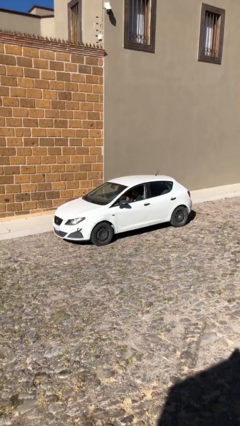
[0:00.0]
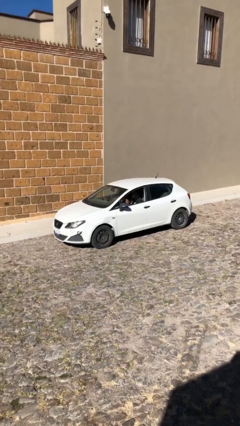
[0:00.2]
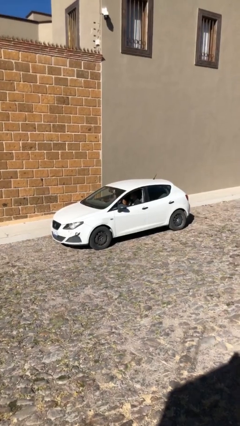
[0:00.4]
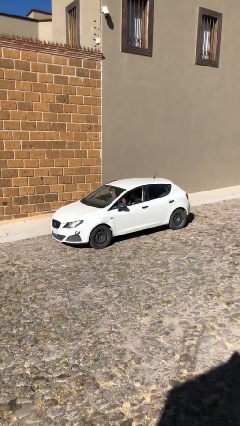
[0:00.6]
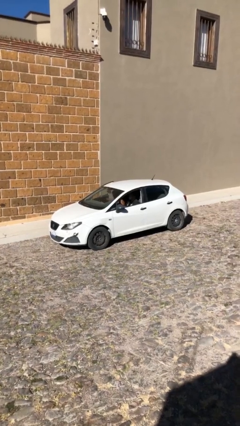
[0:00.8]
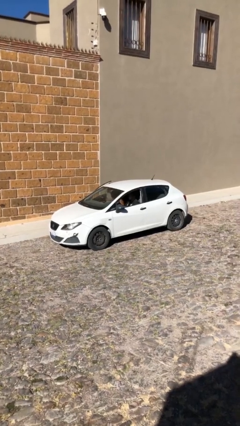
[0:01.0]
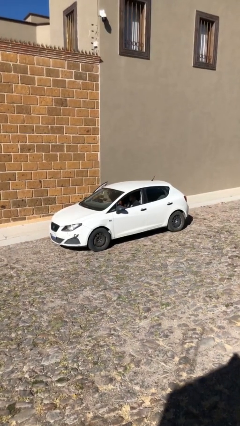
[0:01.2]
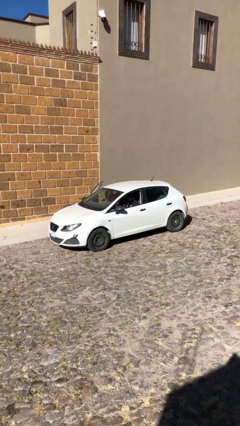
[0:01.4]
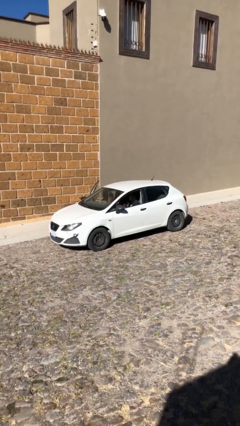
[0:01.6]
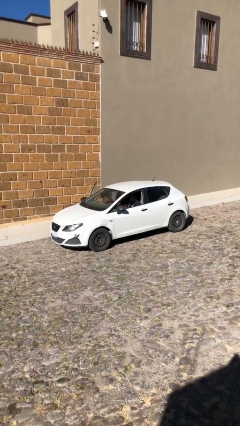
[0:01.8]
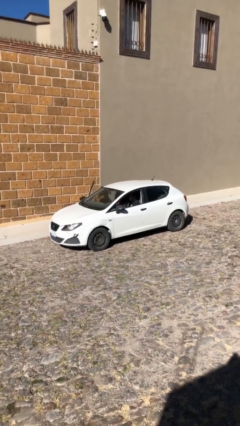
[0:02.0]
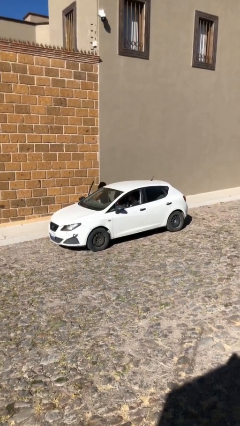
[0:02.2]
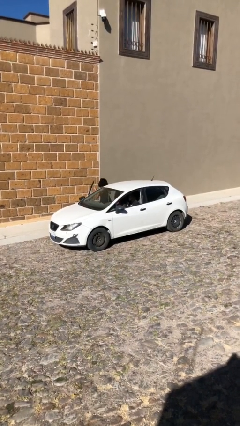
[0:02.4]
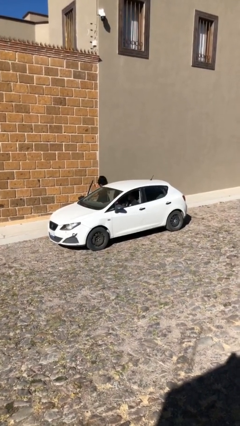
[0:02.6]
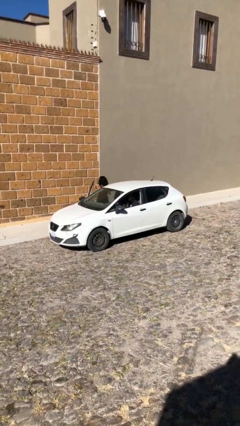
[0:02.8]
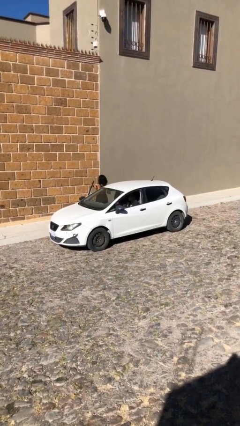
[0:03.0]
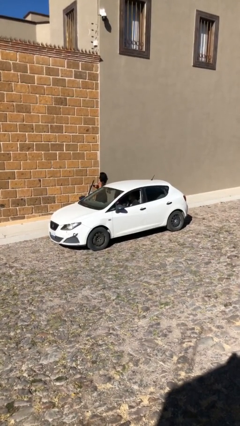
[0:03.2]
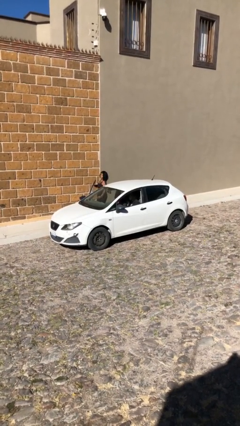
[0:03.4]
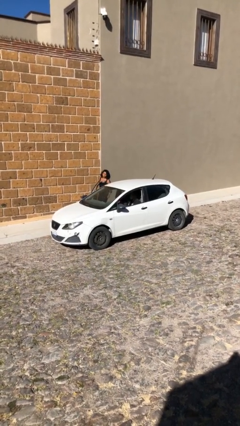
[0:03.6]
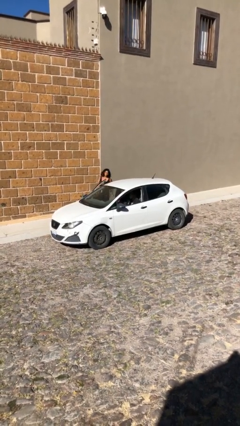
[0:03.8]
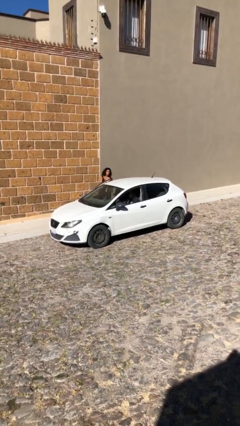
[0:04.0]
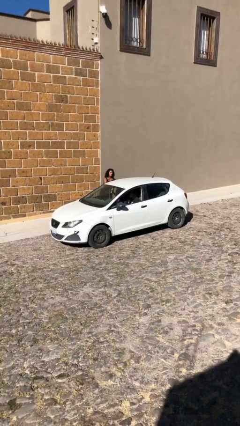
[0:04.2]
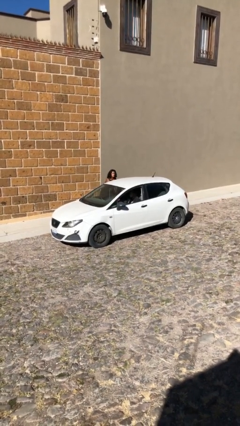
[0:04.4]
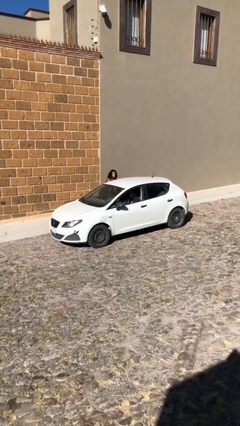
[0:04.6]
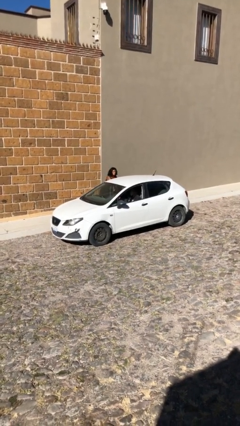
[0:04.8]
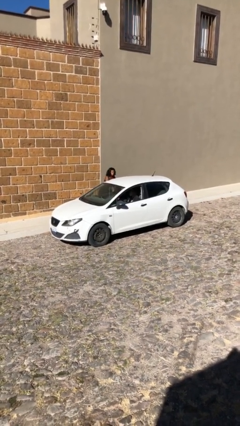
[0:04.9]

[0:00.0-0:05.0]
car drops off person

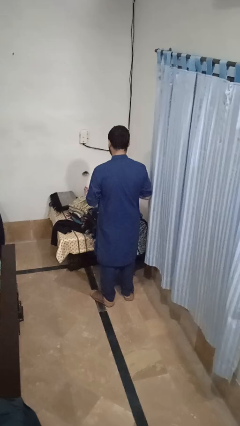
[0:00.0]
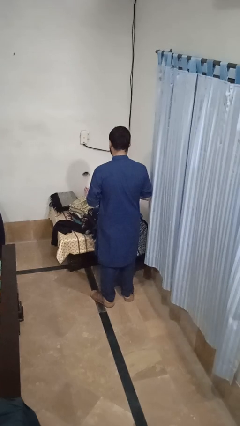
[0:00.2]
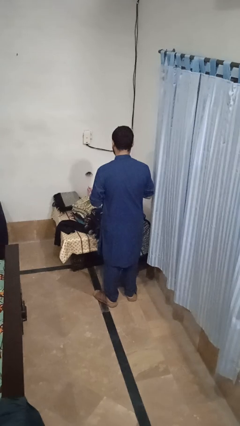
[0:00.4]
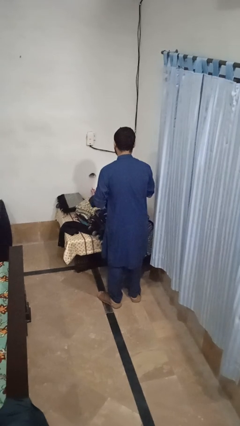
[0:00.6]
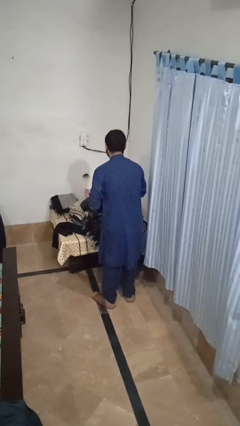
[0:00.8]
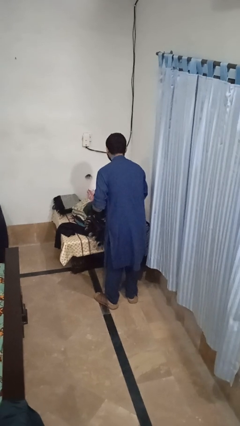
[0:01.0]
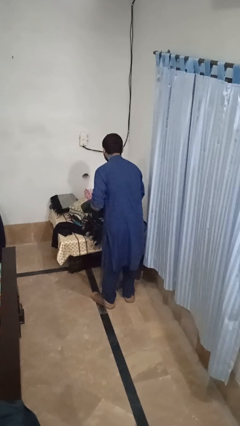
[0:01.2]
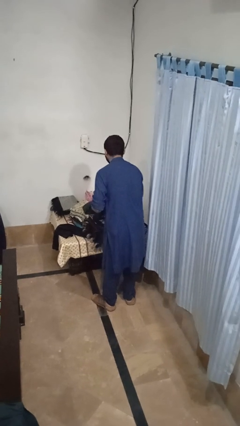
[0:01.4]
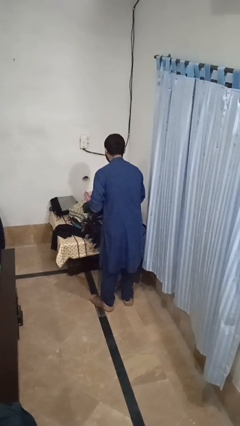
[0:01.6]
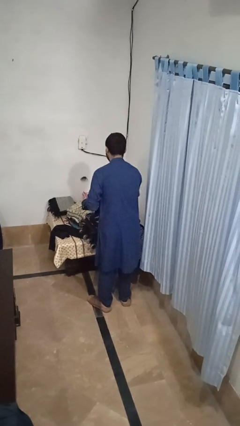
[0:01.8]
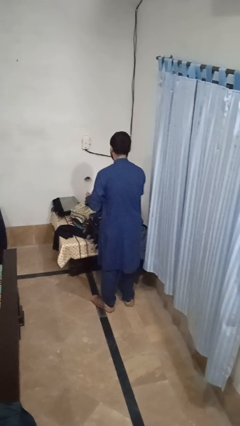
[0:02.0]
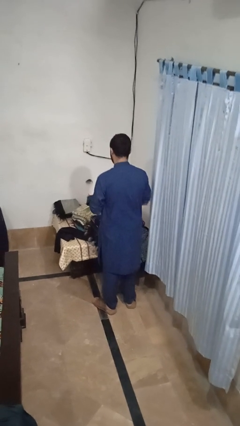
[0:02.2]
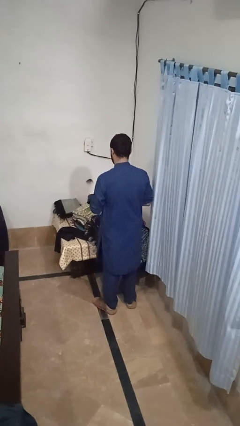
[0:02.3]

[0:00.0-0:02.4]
person loads clothes into suitcase

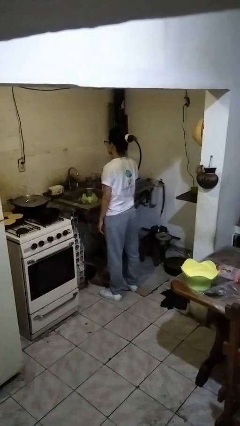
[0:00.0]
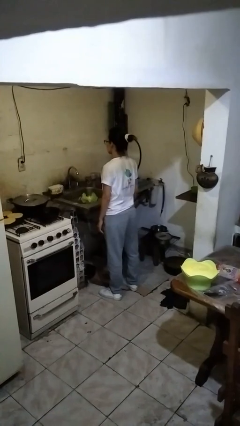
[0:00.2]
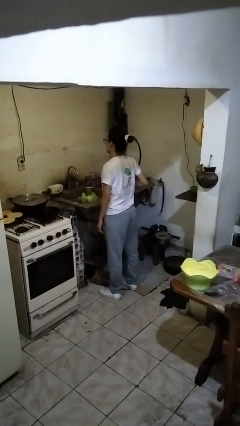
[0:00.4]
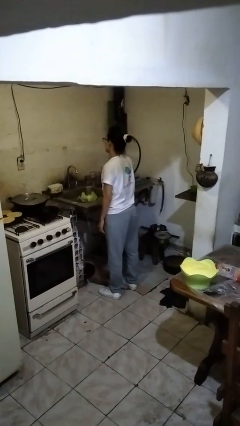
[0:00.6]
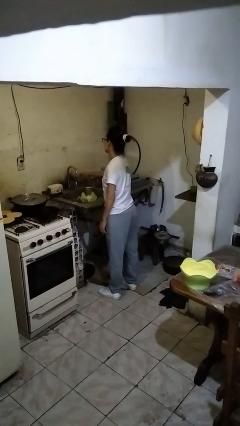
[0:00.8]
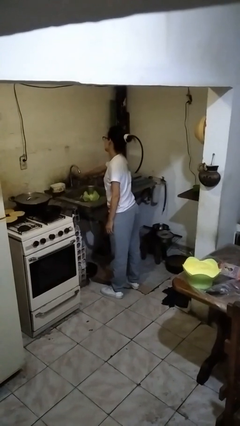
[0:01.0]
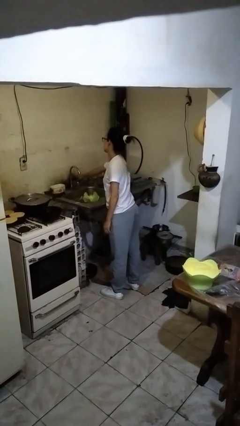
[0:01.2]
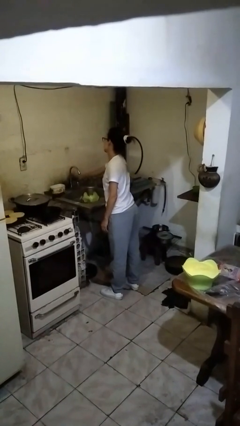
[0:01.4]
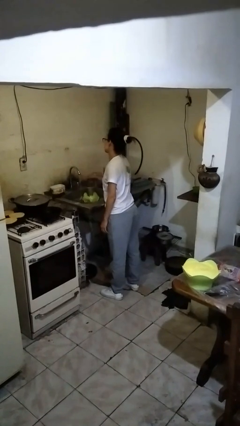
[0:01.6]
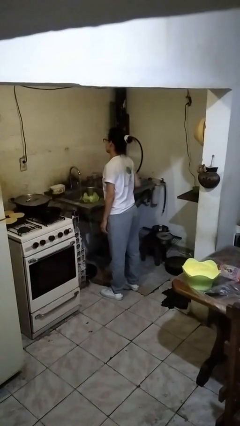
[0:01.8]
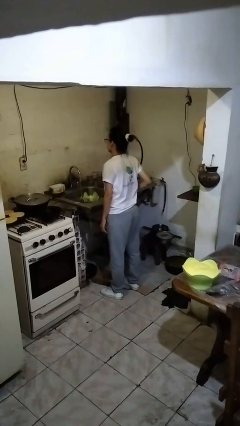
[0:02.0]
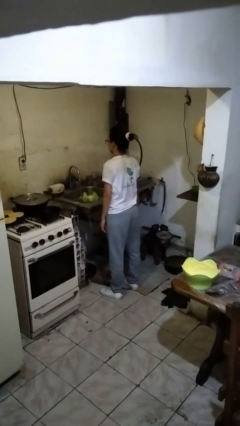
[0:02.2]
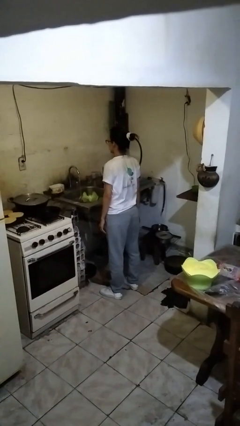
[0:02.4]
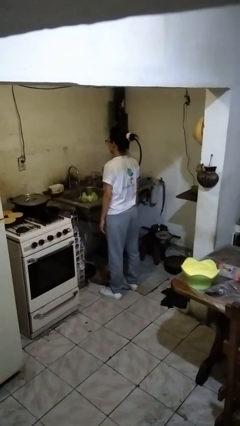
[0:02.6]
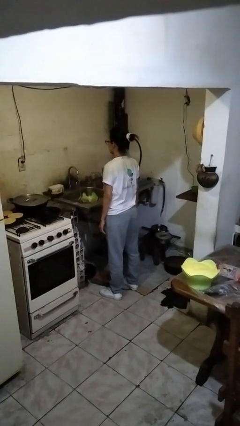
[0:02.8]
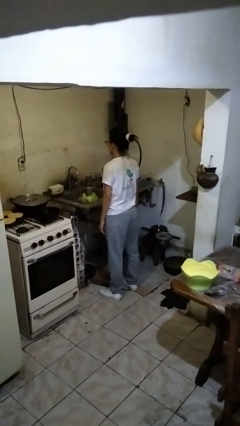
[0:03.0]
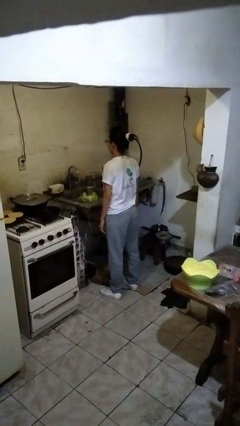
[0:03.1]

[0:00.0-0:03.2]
person turns on faucet

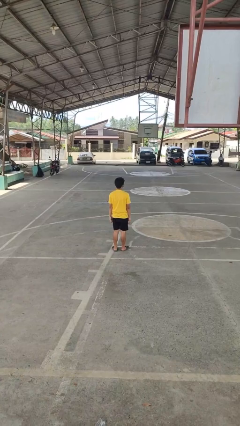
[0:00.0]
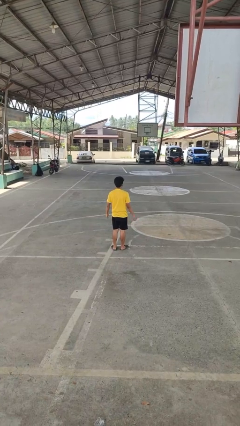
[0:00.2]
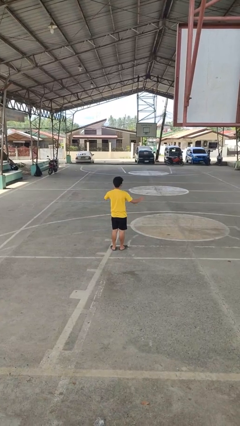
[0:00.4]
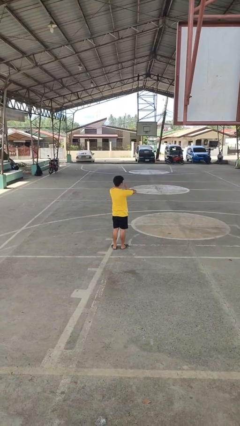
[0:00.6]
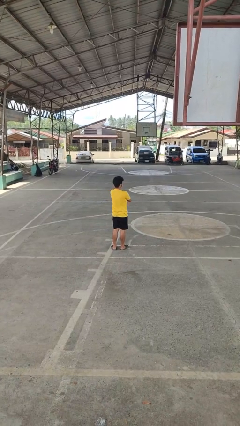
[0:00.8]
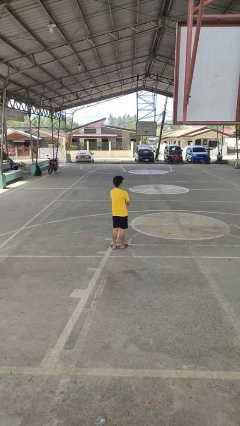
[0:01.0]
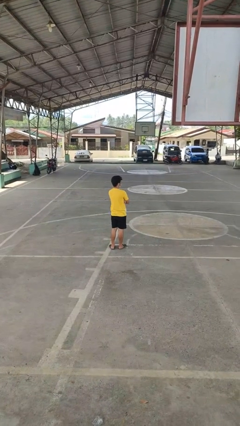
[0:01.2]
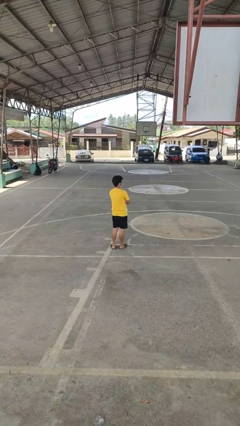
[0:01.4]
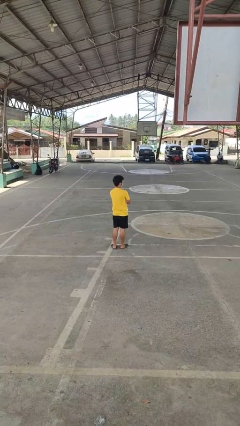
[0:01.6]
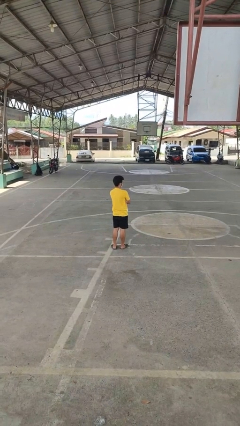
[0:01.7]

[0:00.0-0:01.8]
person crosses arms

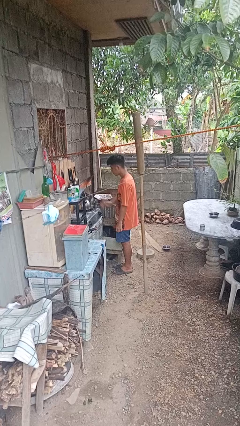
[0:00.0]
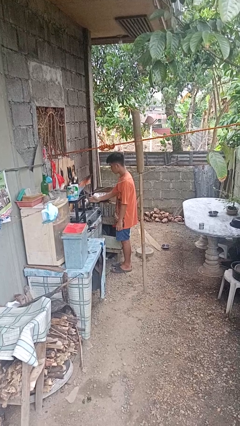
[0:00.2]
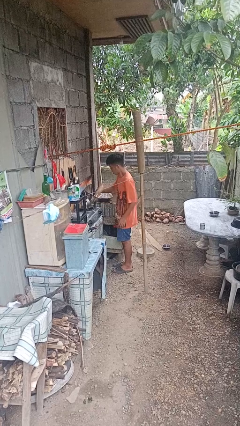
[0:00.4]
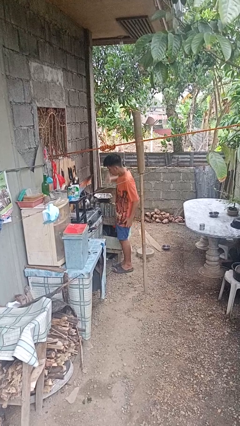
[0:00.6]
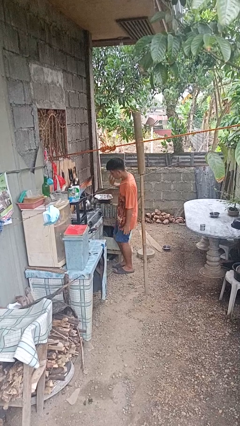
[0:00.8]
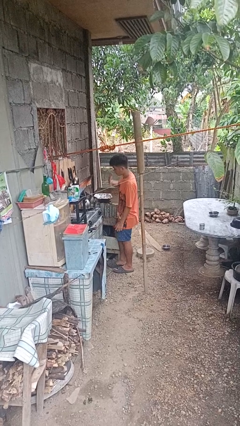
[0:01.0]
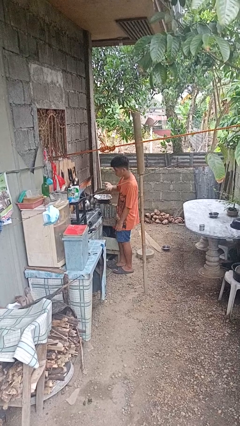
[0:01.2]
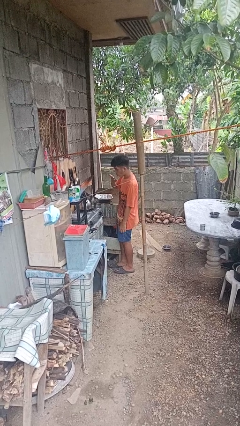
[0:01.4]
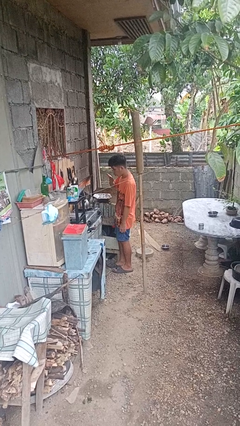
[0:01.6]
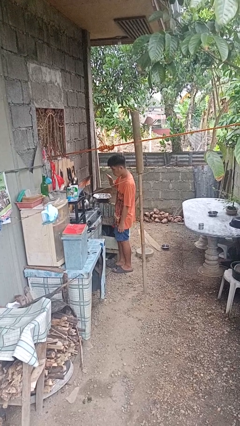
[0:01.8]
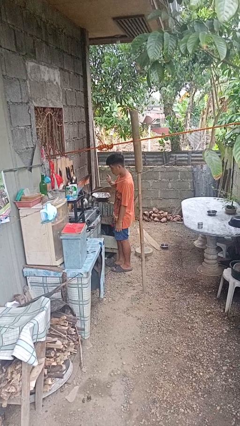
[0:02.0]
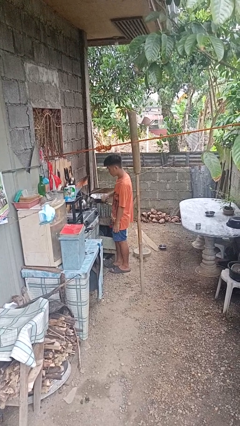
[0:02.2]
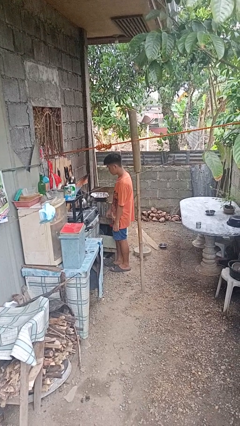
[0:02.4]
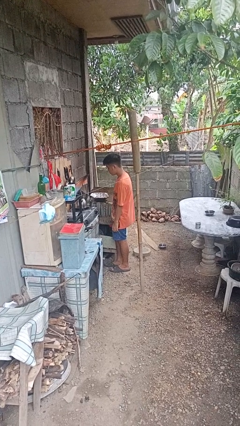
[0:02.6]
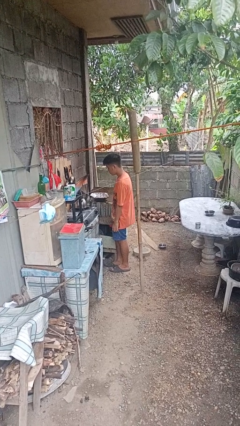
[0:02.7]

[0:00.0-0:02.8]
person burns hand

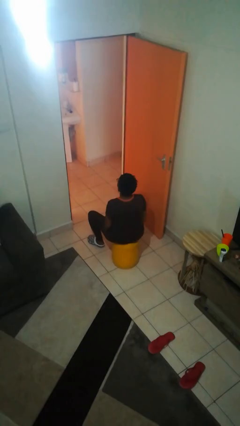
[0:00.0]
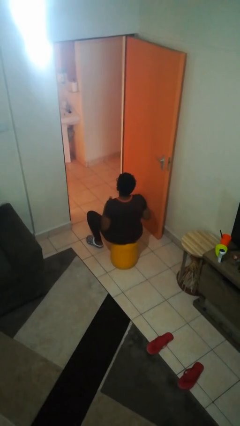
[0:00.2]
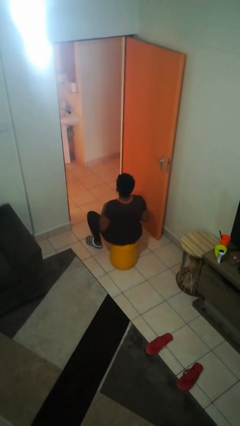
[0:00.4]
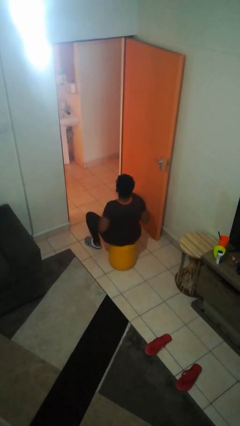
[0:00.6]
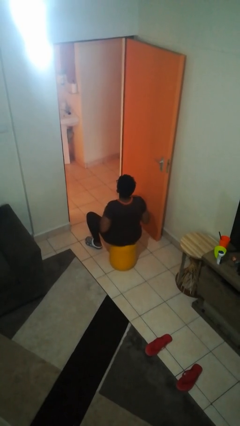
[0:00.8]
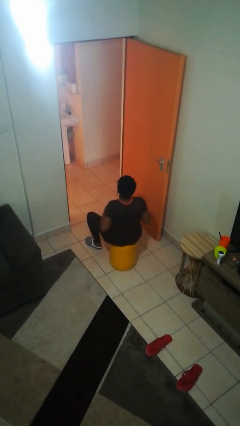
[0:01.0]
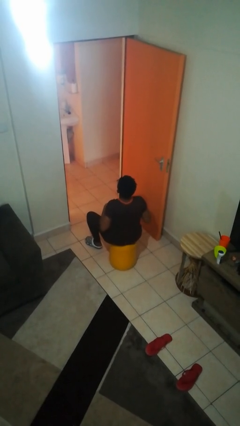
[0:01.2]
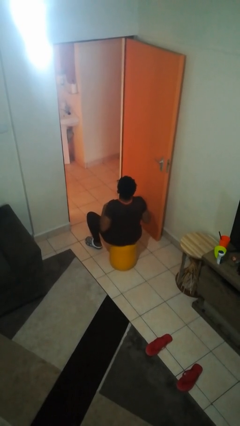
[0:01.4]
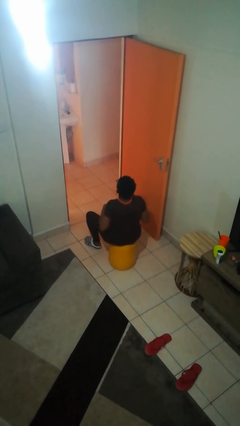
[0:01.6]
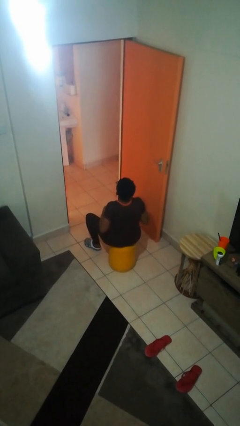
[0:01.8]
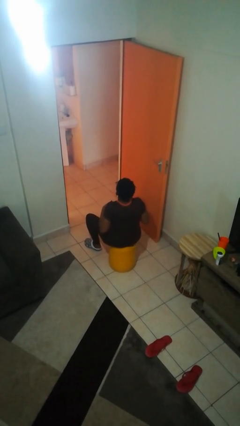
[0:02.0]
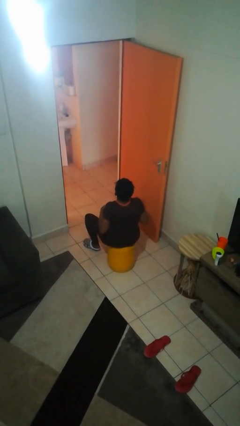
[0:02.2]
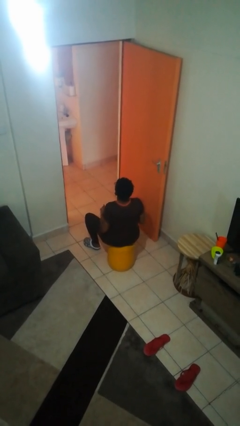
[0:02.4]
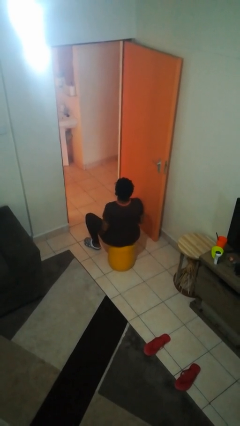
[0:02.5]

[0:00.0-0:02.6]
person drums on chest
